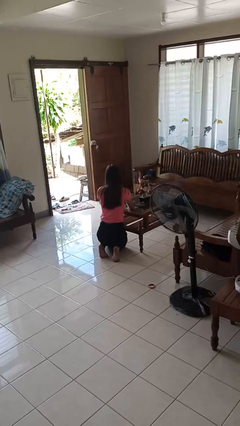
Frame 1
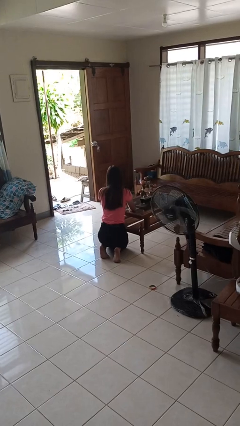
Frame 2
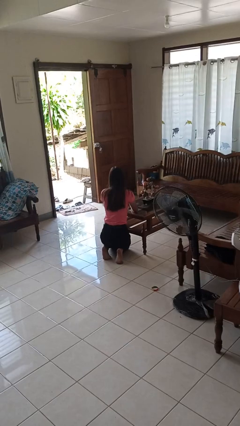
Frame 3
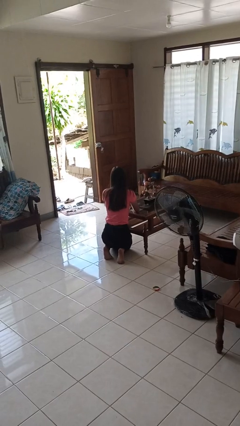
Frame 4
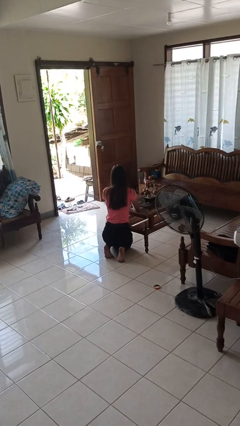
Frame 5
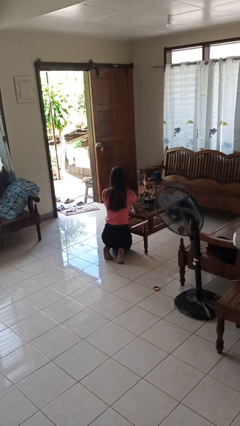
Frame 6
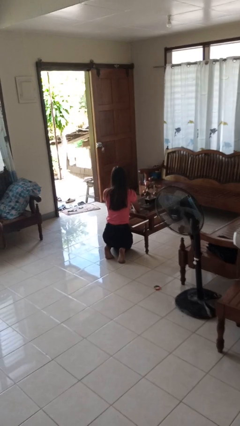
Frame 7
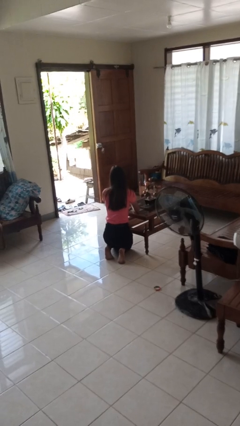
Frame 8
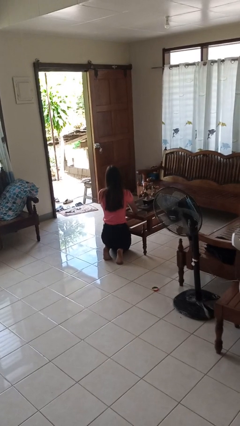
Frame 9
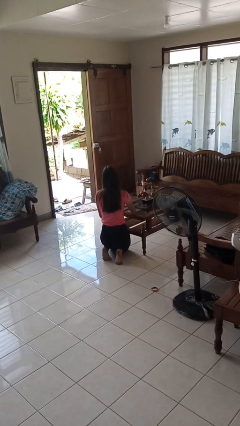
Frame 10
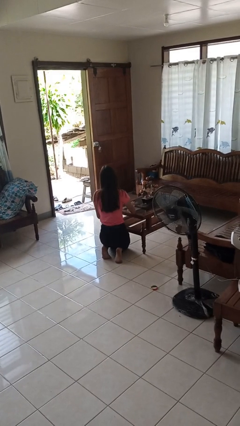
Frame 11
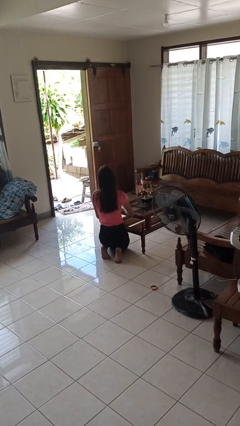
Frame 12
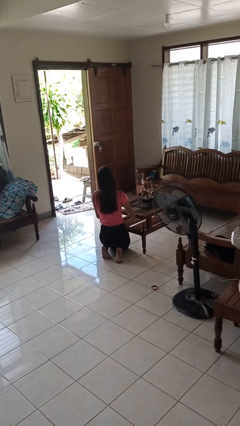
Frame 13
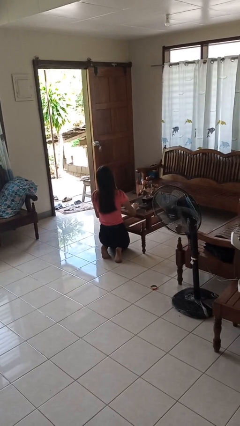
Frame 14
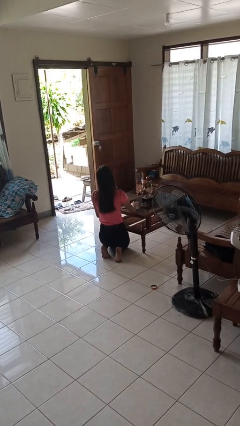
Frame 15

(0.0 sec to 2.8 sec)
person cleans table with rag

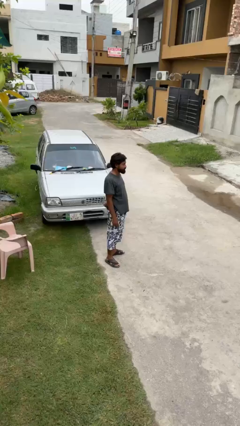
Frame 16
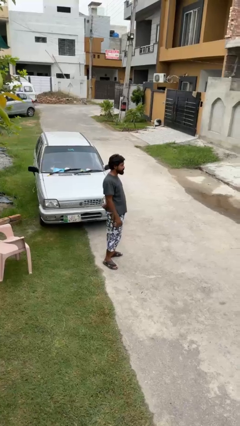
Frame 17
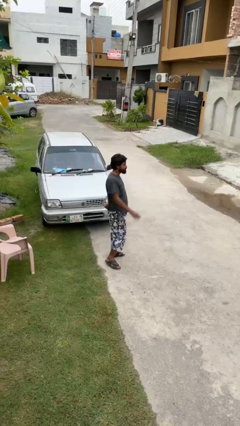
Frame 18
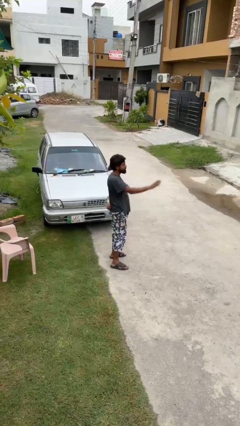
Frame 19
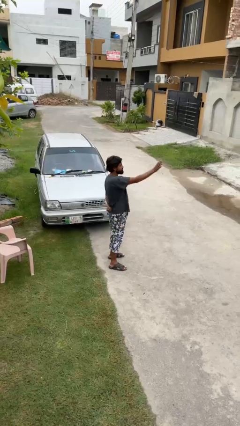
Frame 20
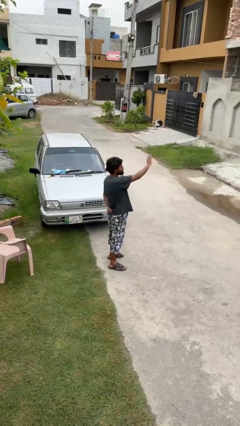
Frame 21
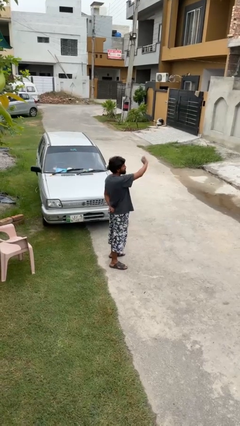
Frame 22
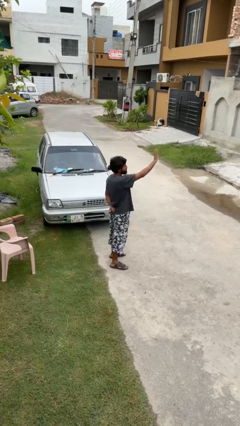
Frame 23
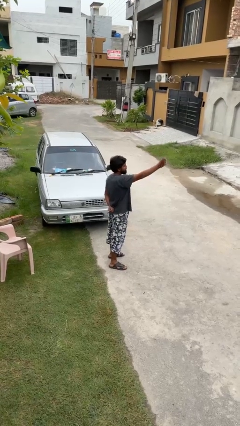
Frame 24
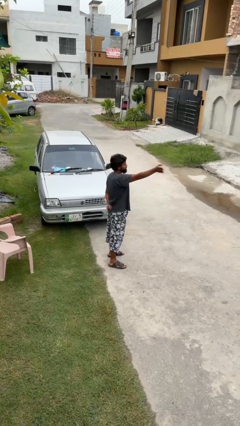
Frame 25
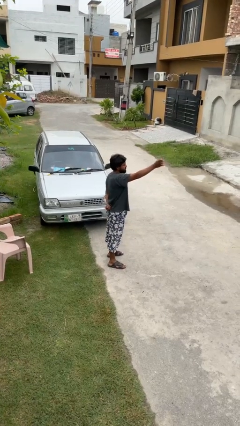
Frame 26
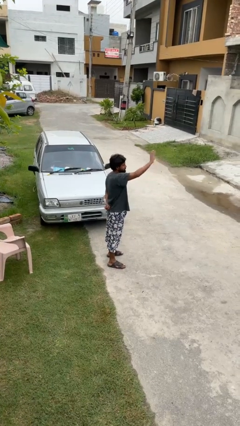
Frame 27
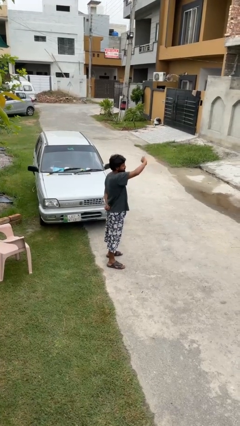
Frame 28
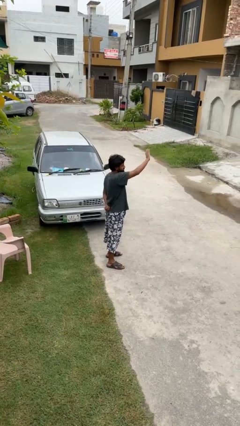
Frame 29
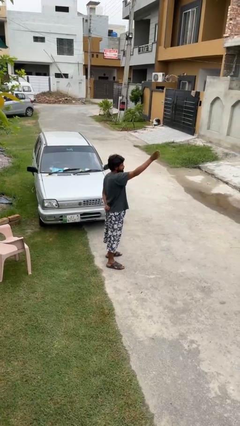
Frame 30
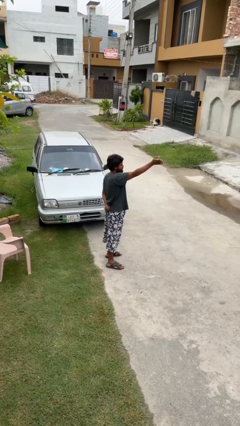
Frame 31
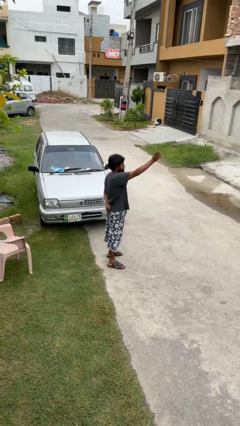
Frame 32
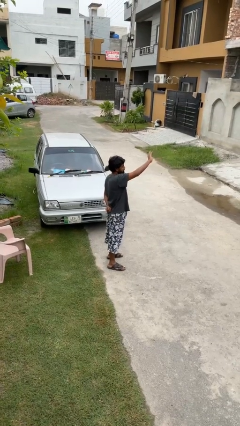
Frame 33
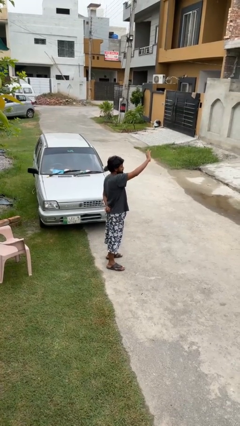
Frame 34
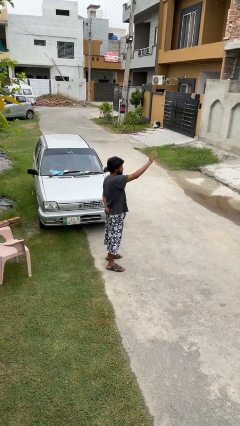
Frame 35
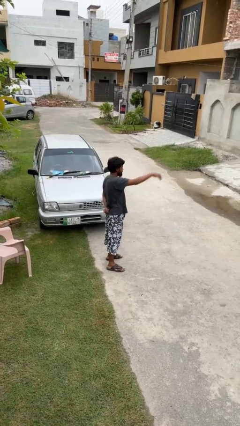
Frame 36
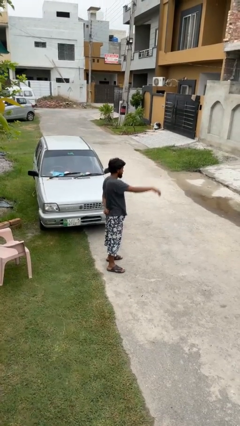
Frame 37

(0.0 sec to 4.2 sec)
person waves at person

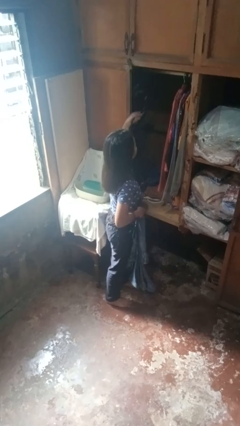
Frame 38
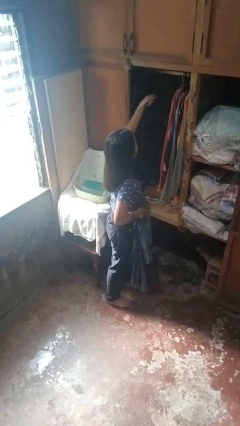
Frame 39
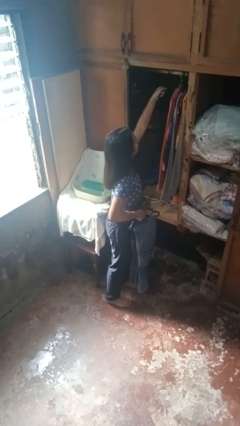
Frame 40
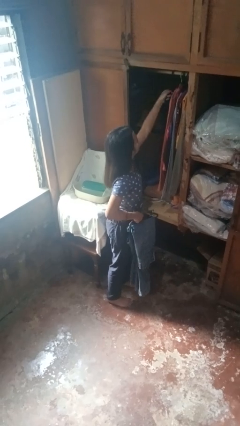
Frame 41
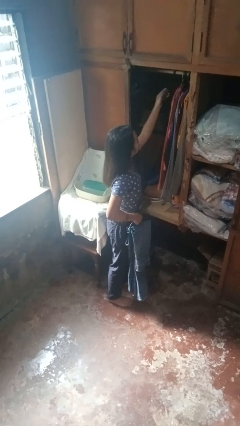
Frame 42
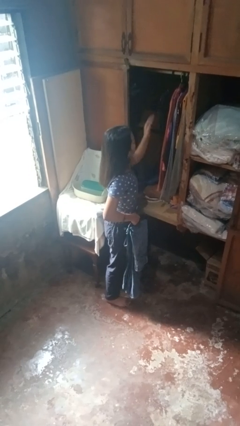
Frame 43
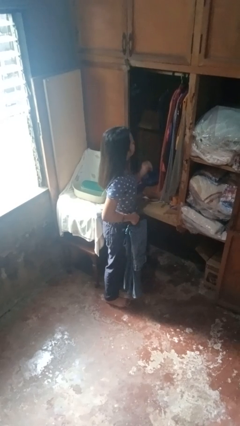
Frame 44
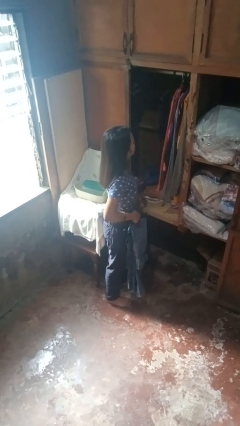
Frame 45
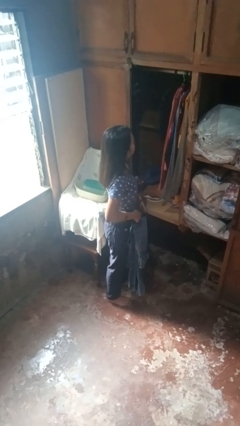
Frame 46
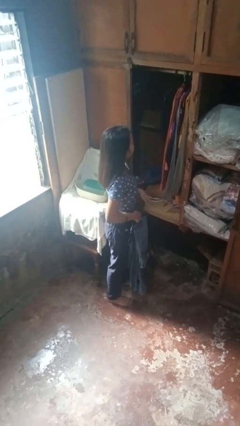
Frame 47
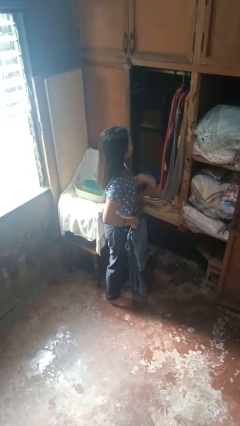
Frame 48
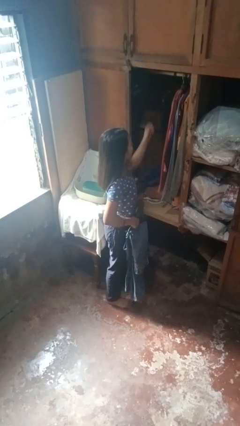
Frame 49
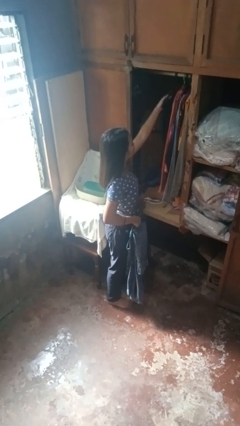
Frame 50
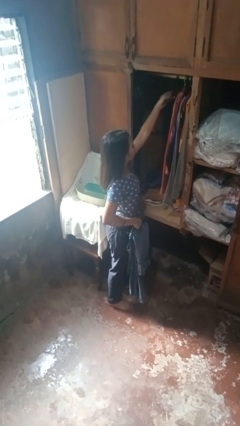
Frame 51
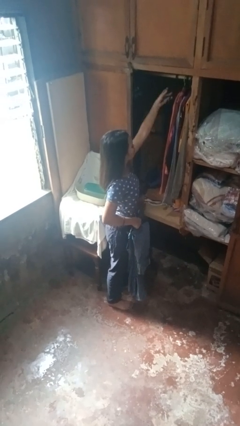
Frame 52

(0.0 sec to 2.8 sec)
person puts clothes into closet

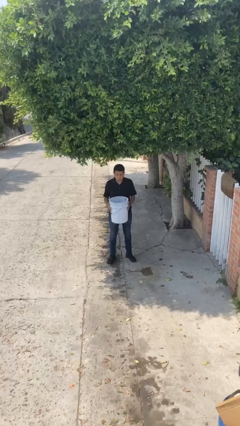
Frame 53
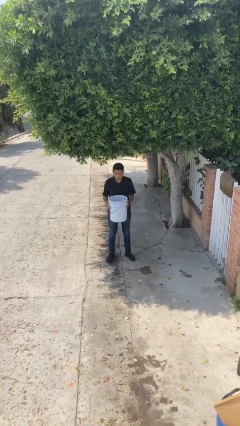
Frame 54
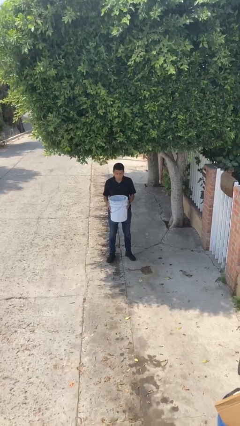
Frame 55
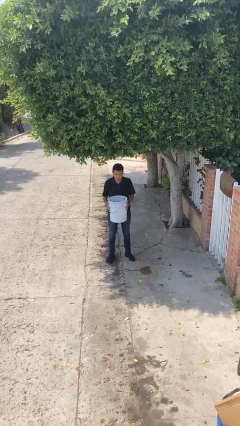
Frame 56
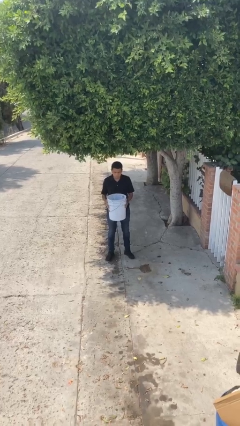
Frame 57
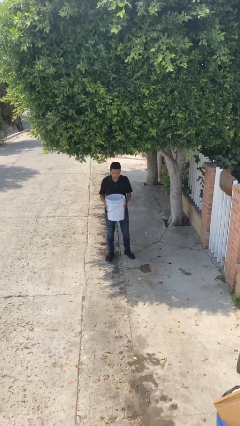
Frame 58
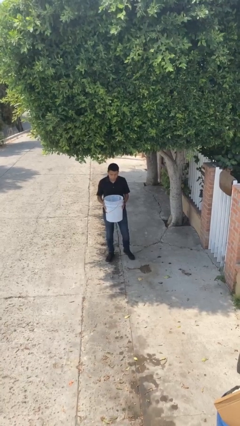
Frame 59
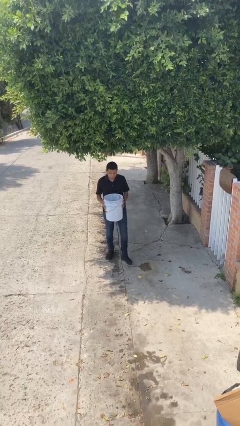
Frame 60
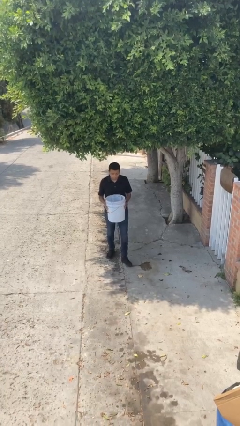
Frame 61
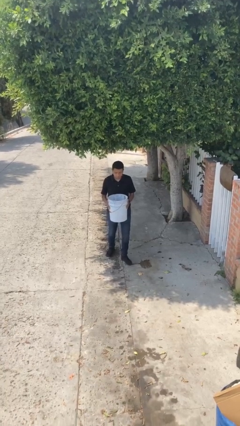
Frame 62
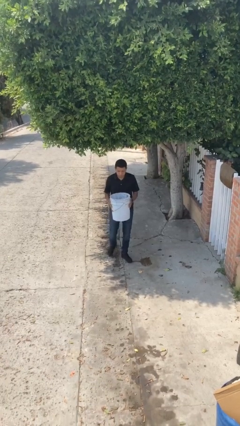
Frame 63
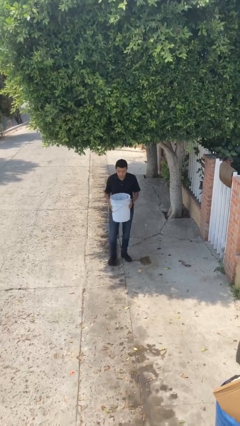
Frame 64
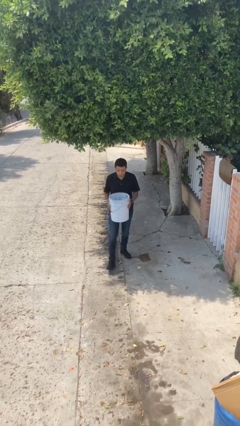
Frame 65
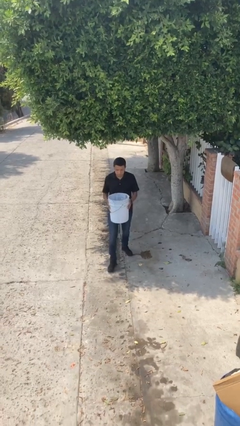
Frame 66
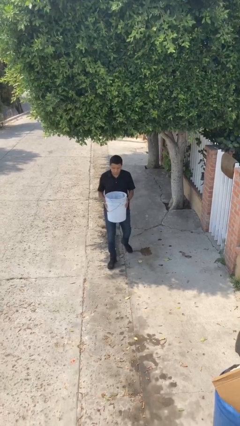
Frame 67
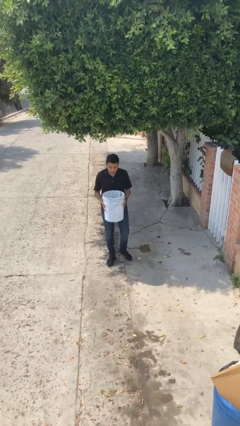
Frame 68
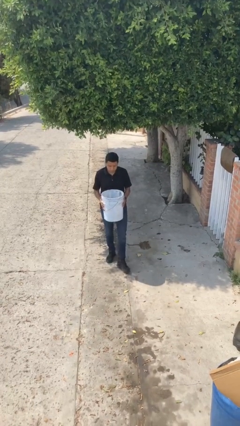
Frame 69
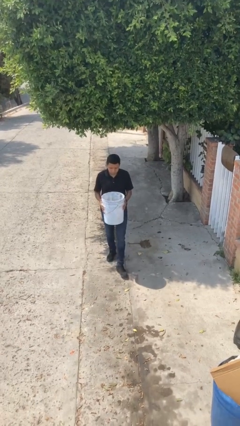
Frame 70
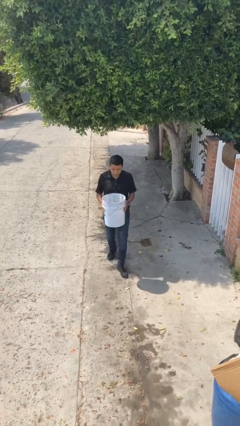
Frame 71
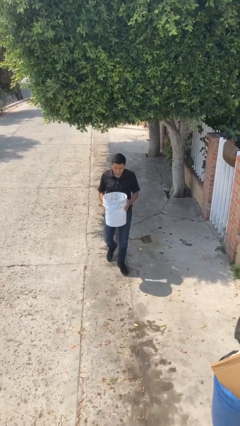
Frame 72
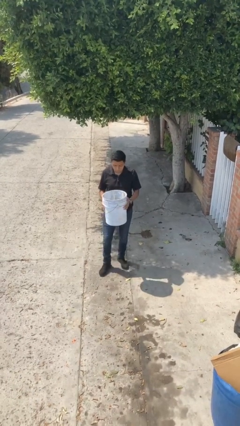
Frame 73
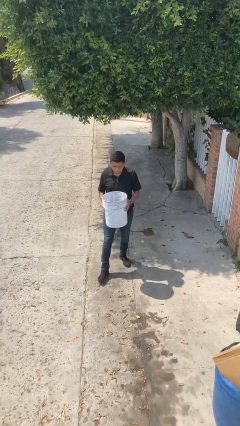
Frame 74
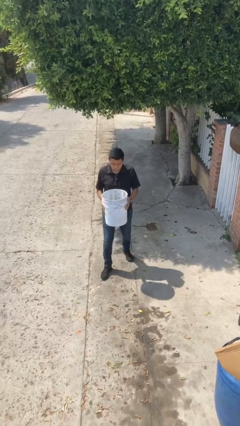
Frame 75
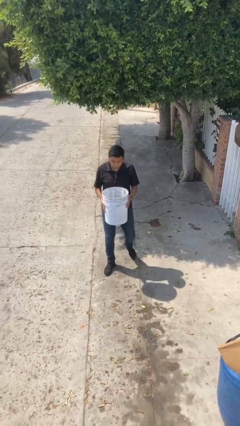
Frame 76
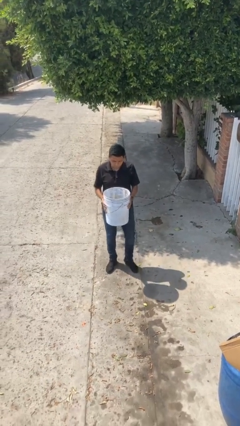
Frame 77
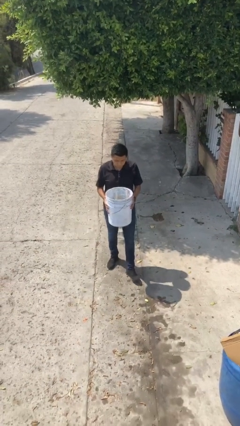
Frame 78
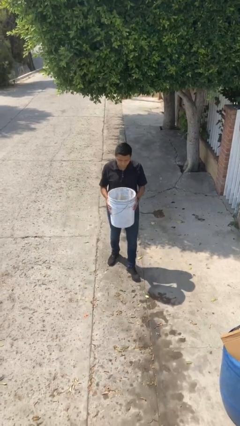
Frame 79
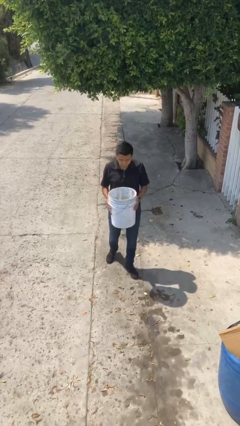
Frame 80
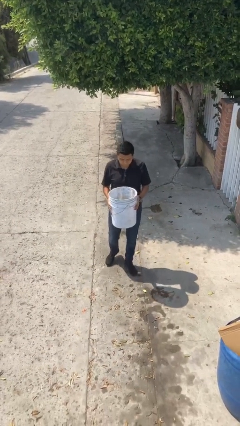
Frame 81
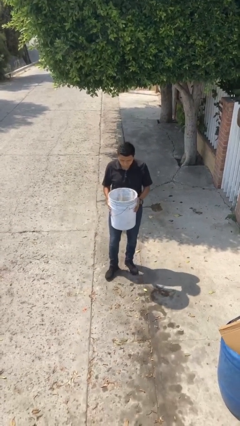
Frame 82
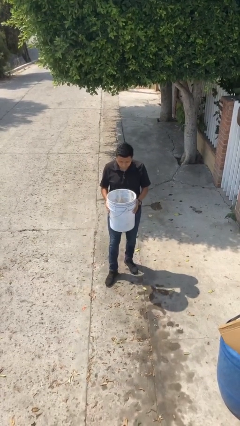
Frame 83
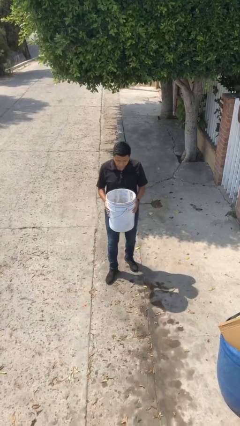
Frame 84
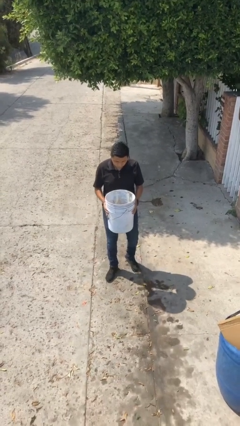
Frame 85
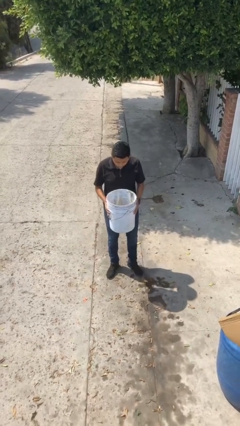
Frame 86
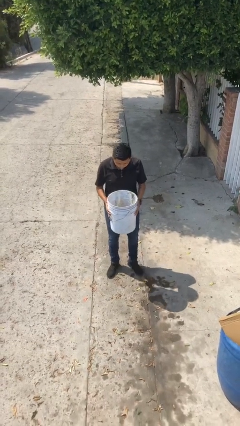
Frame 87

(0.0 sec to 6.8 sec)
person carries heavy object

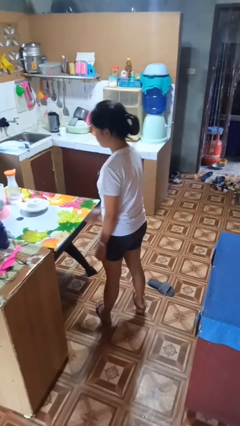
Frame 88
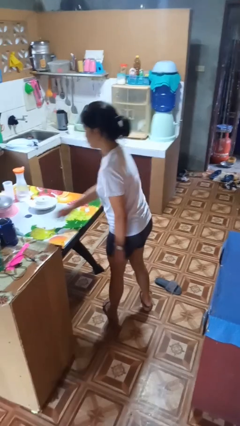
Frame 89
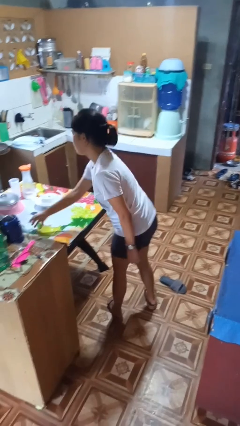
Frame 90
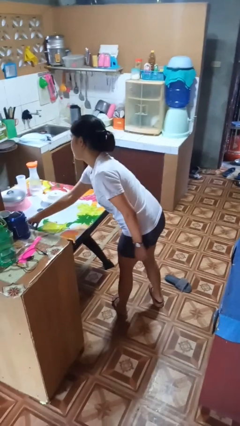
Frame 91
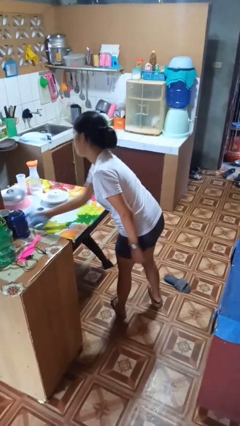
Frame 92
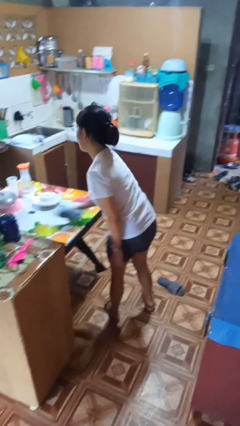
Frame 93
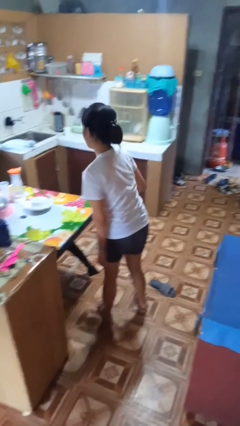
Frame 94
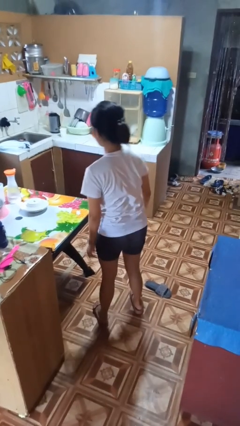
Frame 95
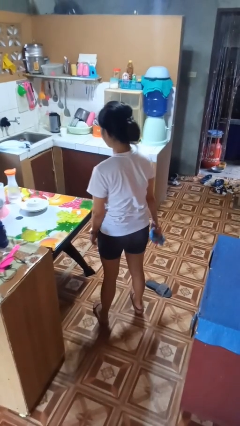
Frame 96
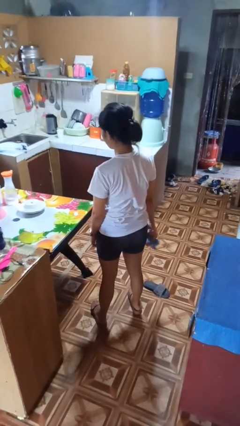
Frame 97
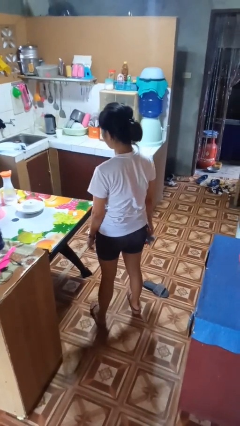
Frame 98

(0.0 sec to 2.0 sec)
person picks up object from table
